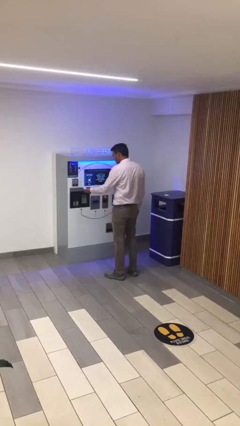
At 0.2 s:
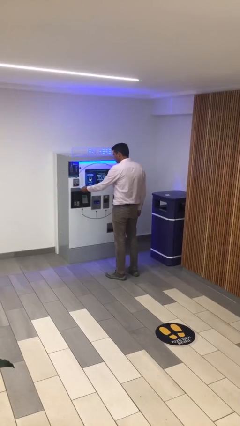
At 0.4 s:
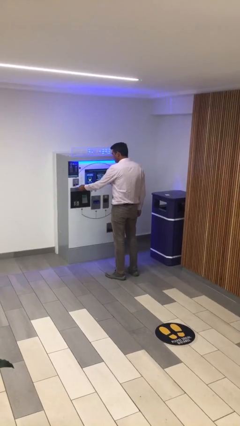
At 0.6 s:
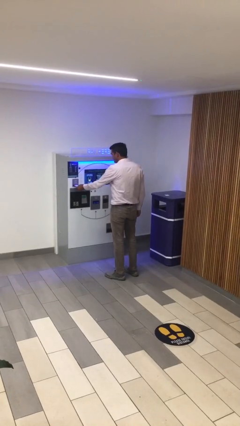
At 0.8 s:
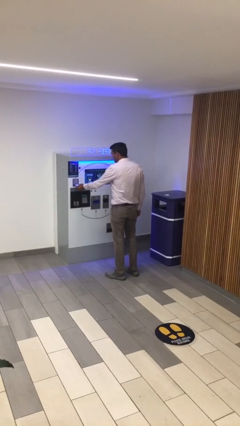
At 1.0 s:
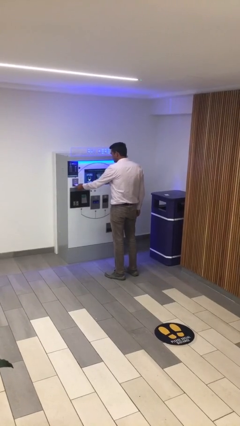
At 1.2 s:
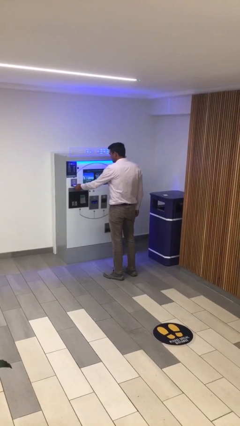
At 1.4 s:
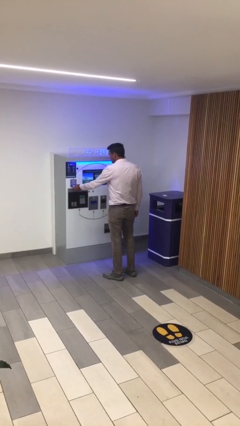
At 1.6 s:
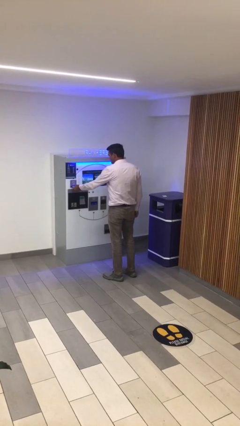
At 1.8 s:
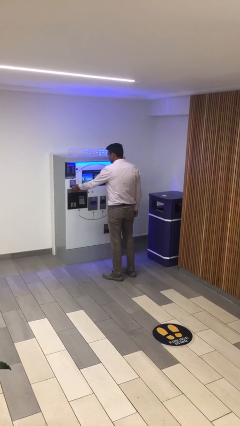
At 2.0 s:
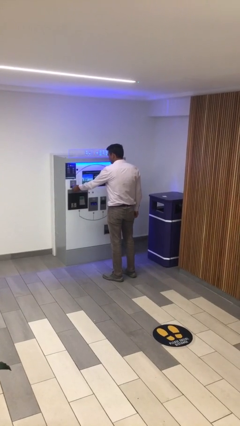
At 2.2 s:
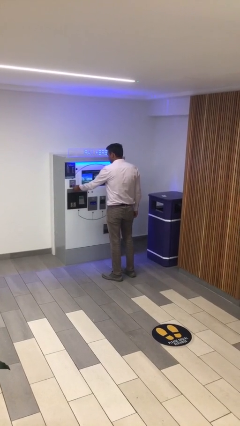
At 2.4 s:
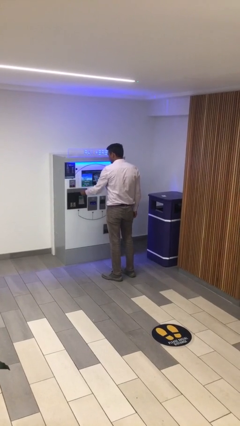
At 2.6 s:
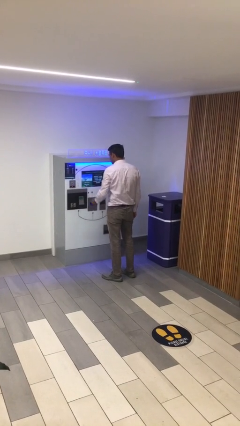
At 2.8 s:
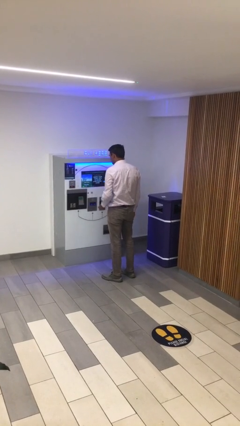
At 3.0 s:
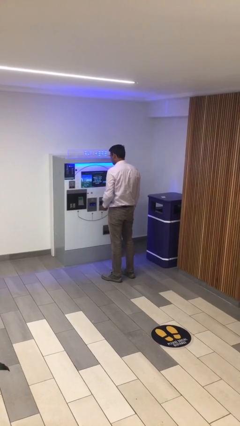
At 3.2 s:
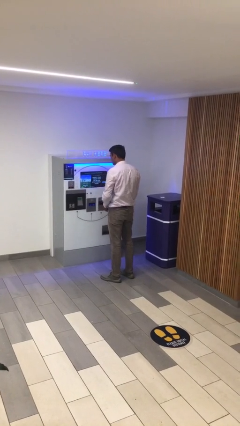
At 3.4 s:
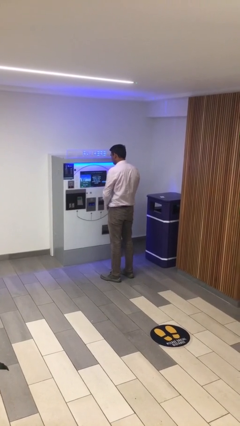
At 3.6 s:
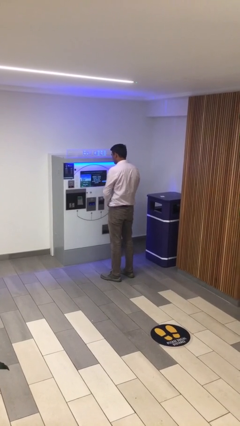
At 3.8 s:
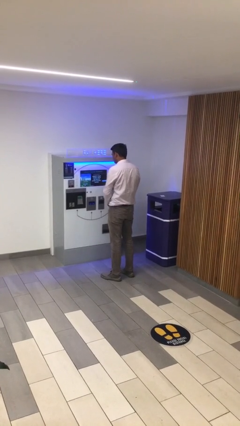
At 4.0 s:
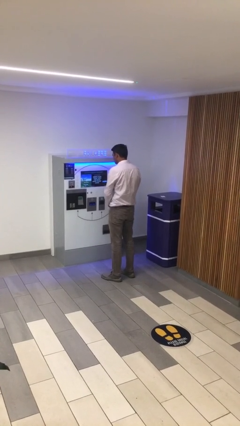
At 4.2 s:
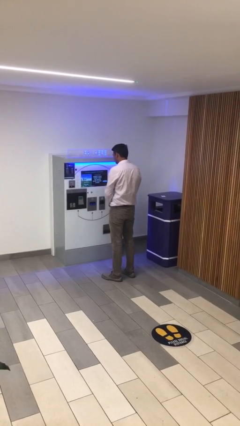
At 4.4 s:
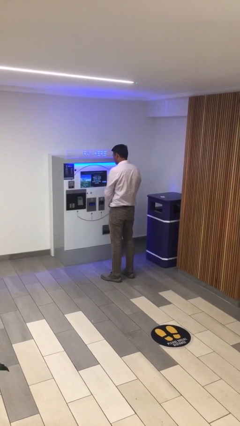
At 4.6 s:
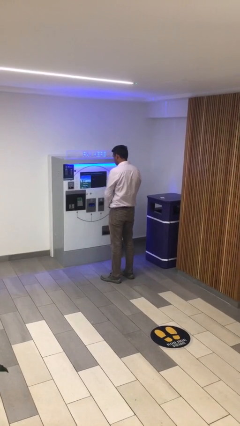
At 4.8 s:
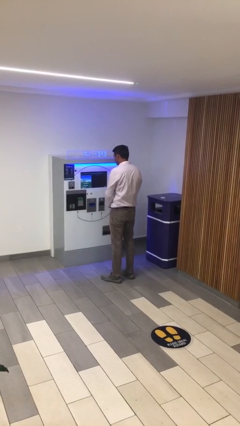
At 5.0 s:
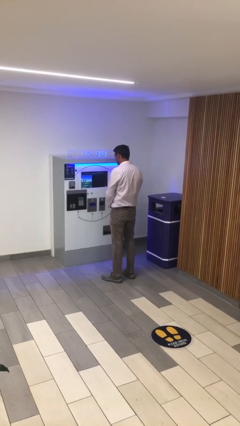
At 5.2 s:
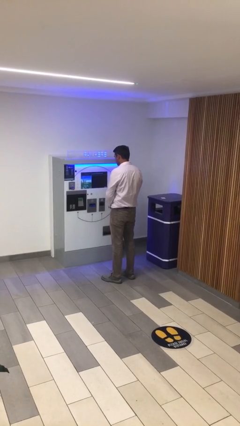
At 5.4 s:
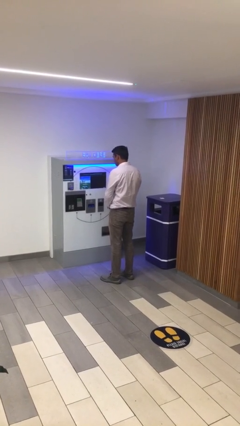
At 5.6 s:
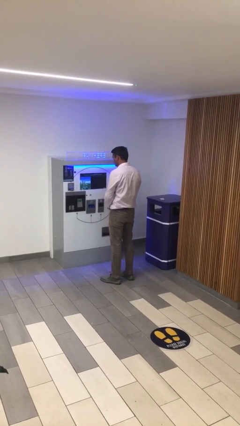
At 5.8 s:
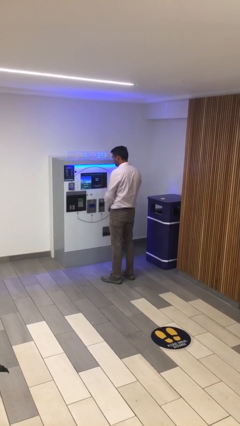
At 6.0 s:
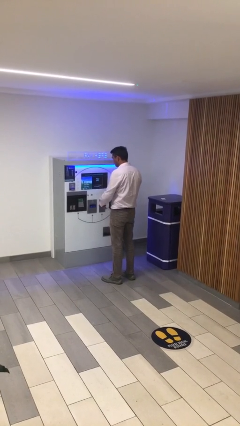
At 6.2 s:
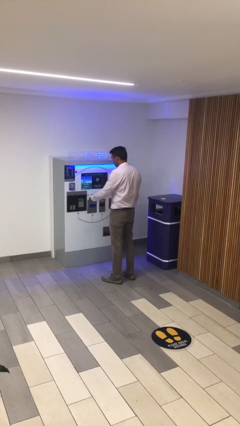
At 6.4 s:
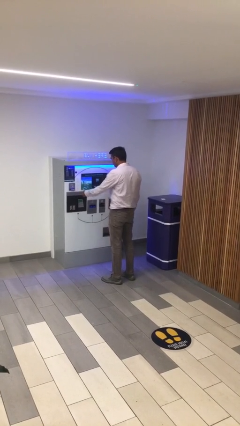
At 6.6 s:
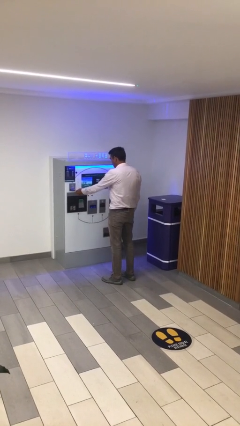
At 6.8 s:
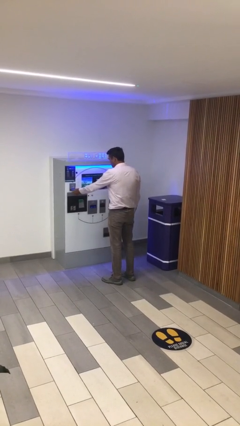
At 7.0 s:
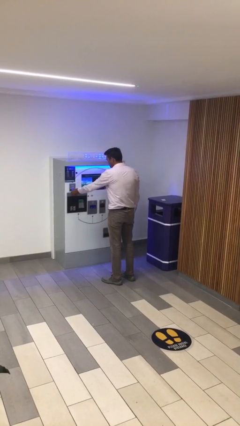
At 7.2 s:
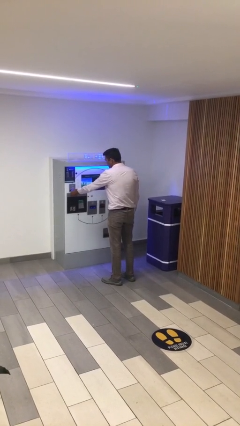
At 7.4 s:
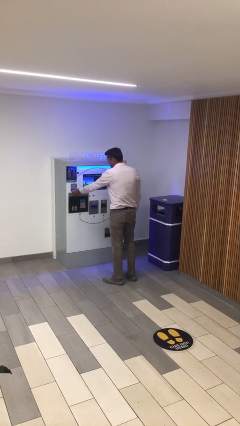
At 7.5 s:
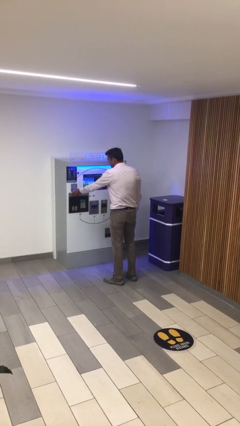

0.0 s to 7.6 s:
person purchases from machine

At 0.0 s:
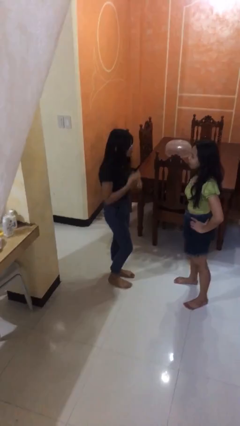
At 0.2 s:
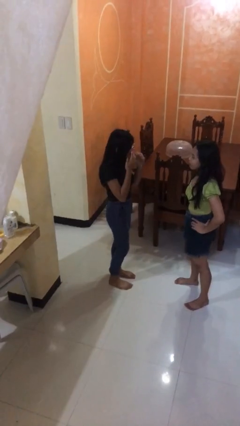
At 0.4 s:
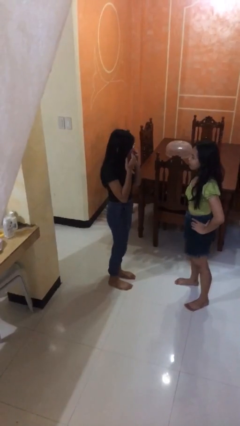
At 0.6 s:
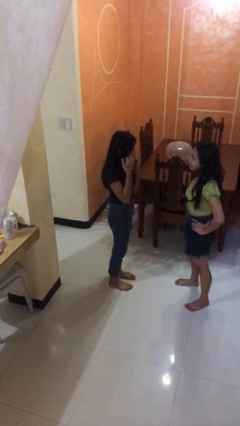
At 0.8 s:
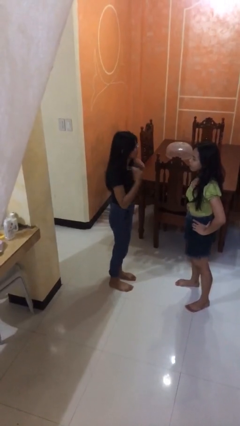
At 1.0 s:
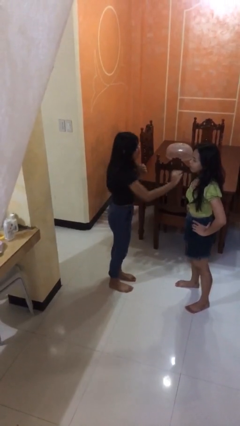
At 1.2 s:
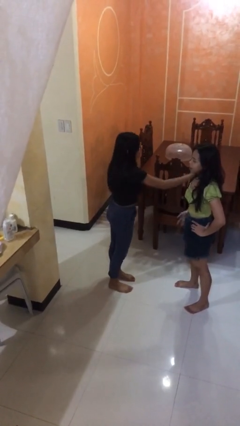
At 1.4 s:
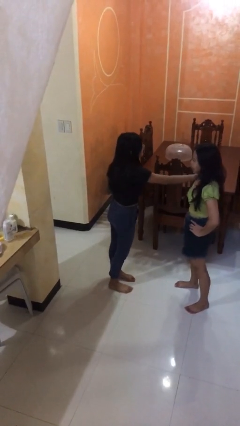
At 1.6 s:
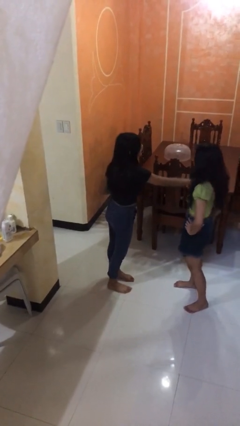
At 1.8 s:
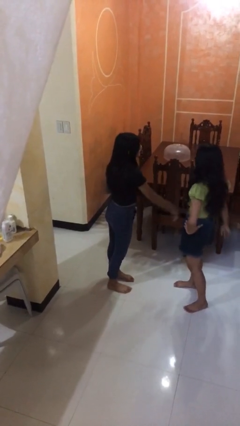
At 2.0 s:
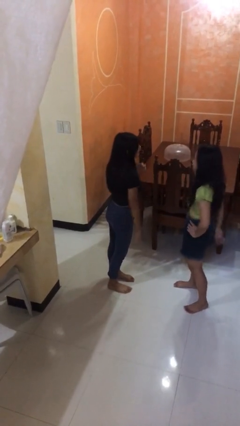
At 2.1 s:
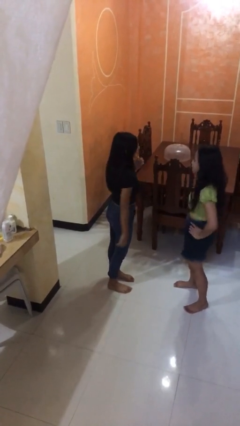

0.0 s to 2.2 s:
person shoves person

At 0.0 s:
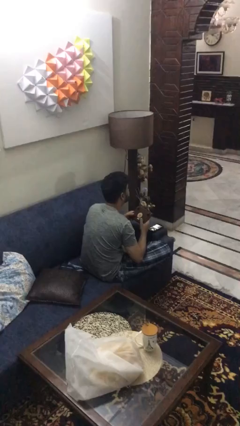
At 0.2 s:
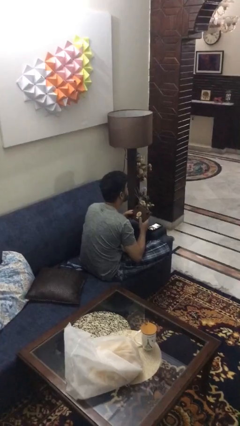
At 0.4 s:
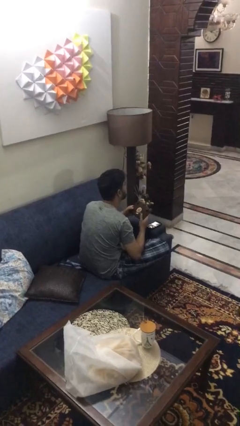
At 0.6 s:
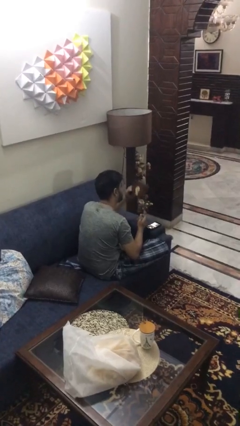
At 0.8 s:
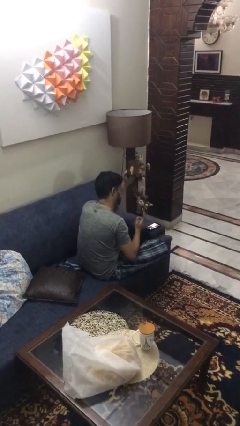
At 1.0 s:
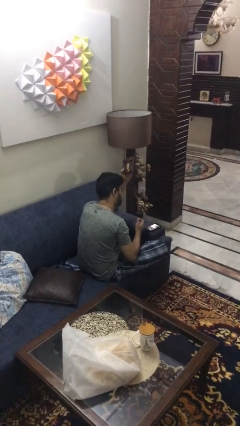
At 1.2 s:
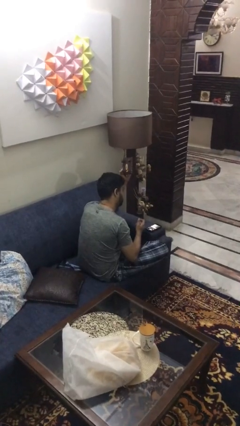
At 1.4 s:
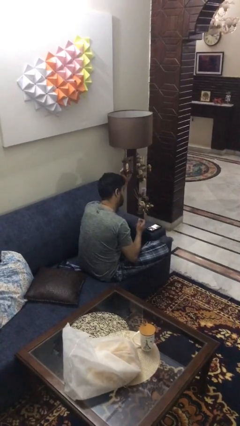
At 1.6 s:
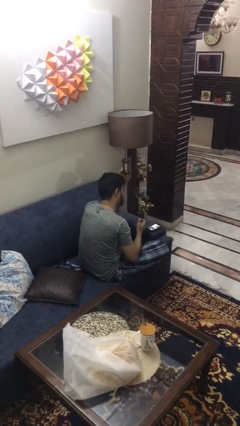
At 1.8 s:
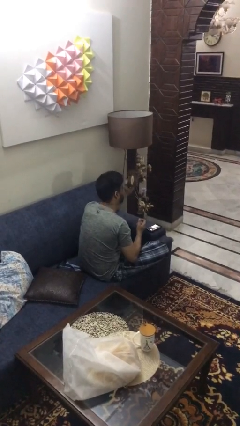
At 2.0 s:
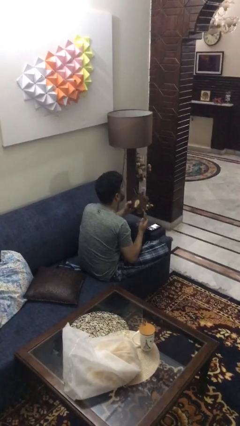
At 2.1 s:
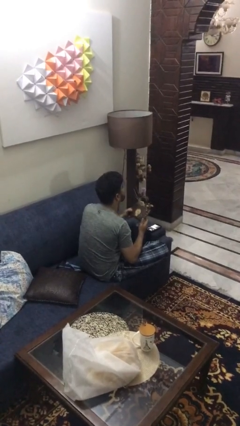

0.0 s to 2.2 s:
person holds object above head

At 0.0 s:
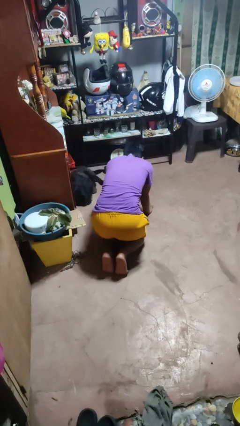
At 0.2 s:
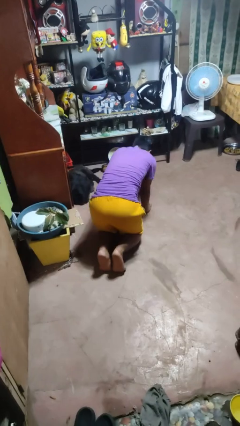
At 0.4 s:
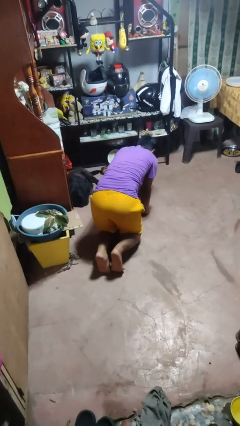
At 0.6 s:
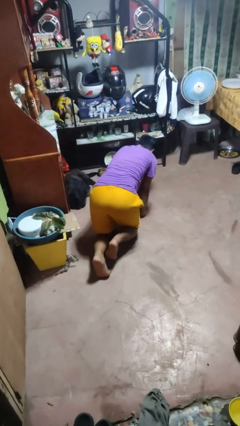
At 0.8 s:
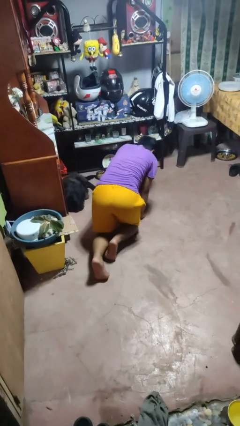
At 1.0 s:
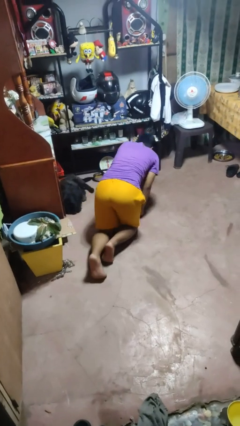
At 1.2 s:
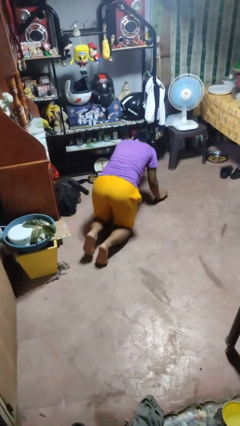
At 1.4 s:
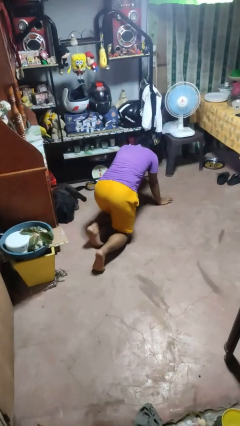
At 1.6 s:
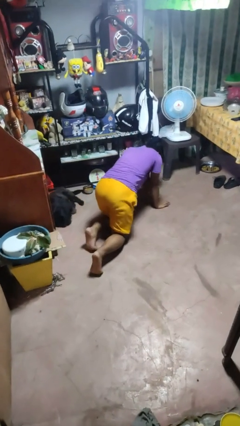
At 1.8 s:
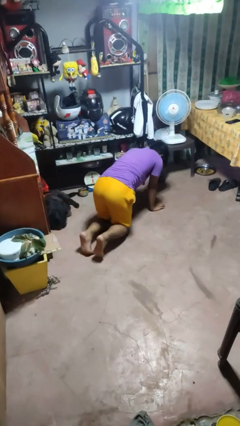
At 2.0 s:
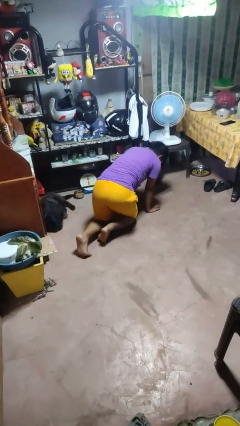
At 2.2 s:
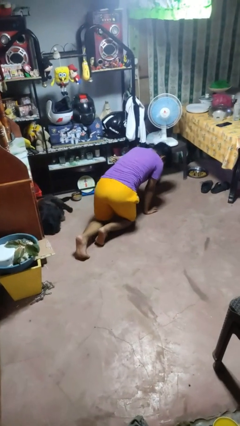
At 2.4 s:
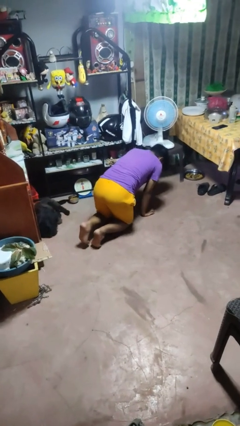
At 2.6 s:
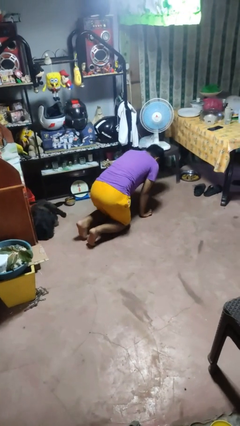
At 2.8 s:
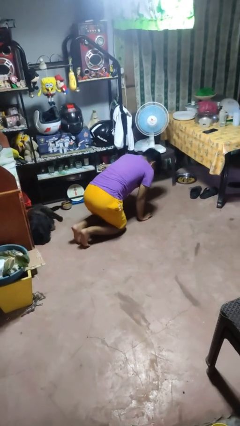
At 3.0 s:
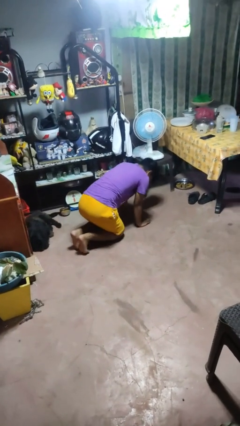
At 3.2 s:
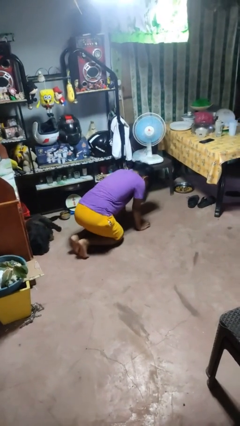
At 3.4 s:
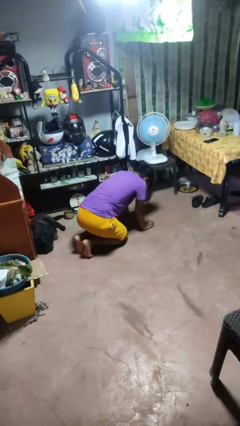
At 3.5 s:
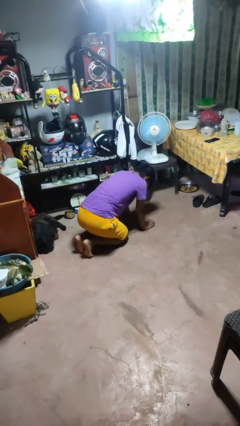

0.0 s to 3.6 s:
person crawls

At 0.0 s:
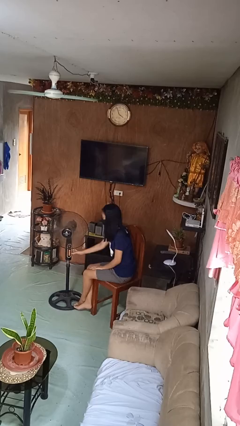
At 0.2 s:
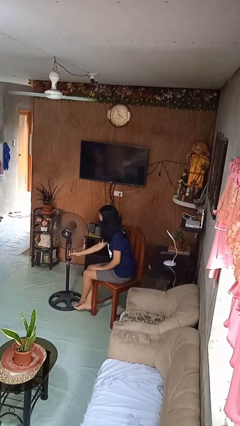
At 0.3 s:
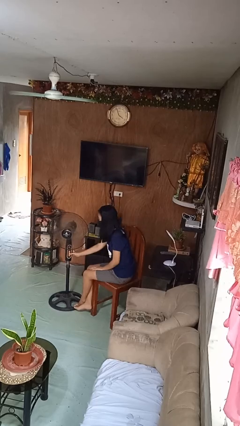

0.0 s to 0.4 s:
person turns on fan

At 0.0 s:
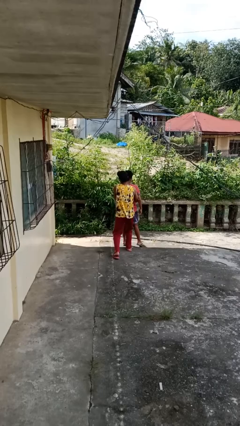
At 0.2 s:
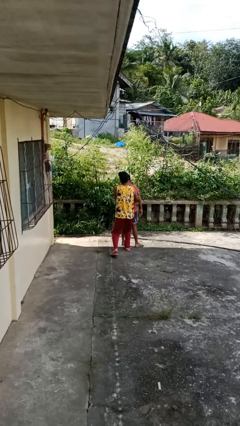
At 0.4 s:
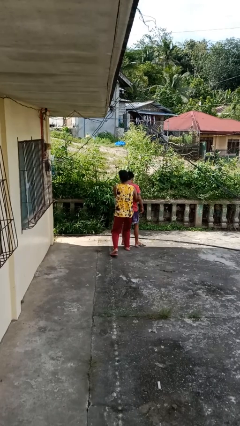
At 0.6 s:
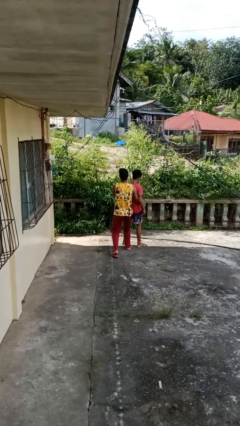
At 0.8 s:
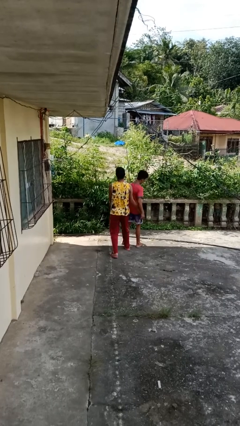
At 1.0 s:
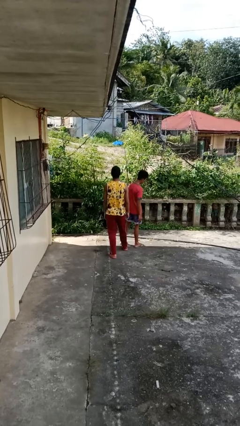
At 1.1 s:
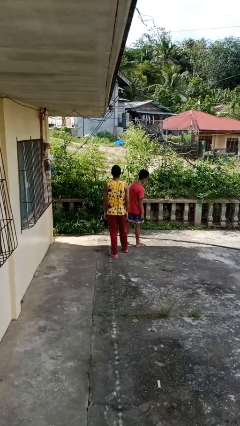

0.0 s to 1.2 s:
person puts down person

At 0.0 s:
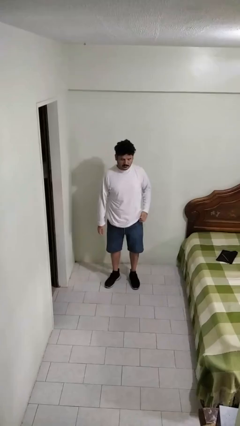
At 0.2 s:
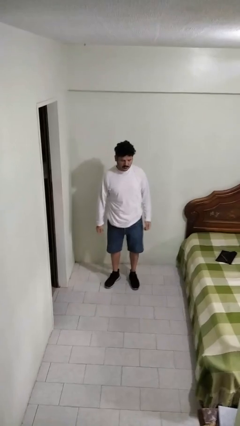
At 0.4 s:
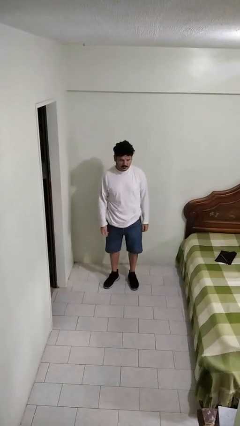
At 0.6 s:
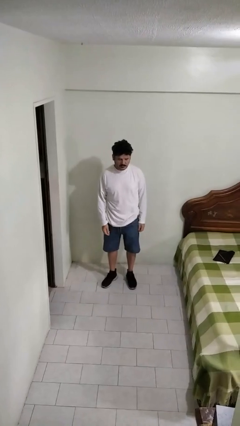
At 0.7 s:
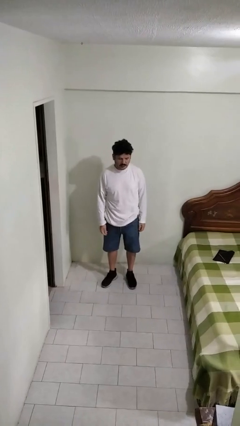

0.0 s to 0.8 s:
person untucks shirt
